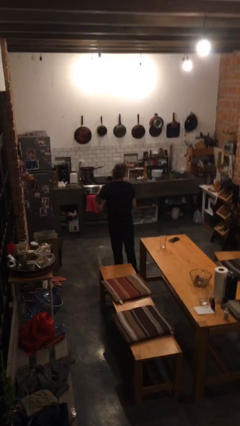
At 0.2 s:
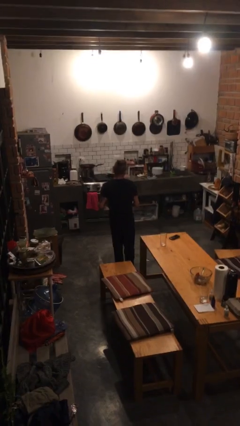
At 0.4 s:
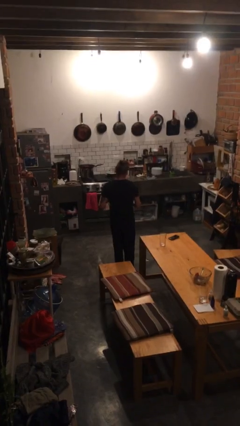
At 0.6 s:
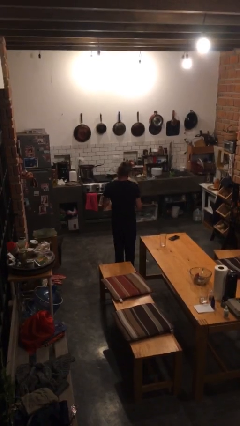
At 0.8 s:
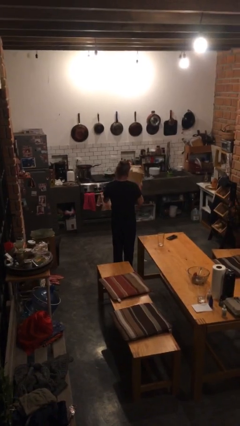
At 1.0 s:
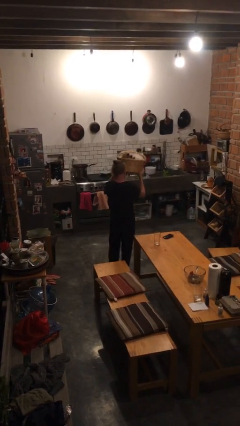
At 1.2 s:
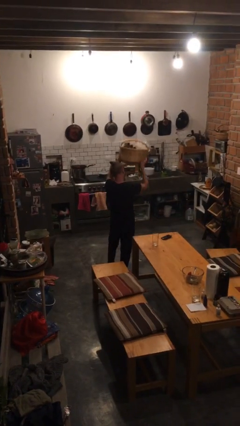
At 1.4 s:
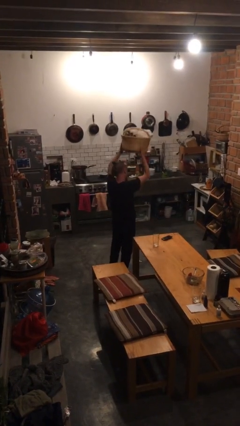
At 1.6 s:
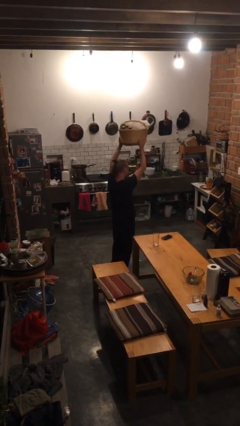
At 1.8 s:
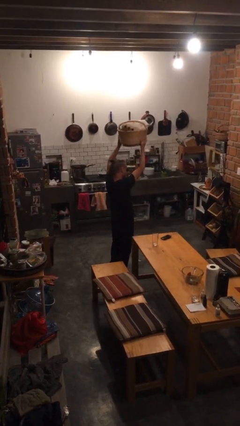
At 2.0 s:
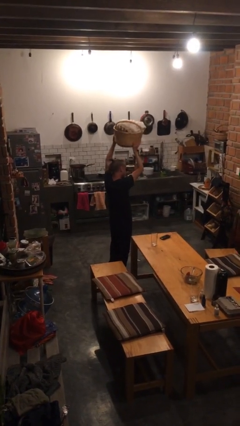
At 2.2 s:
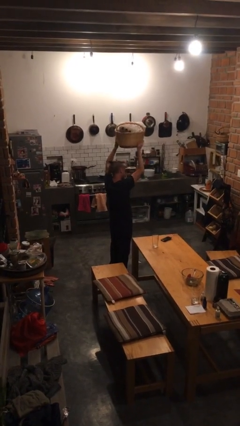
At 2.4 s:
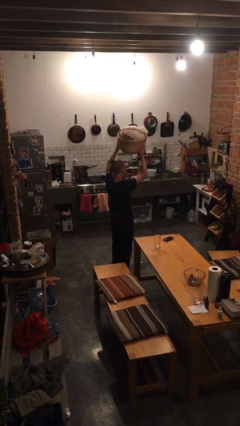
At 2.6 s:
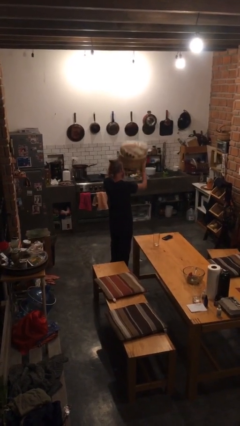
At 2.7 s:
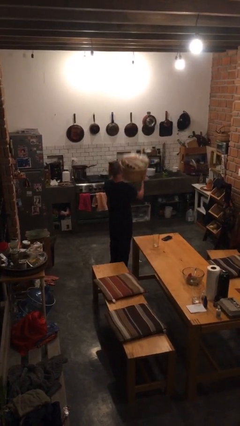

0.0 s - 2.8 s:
person holds object above head

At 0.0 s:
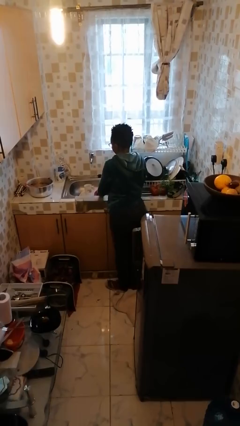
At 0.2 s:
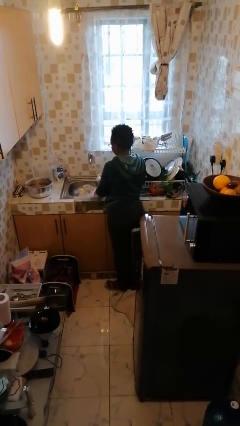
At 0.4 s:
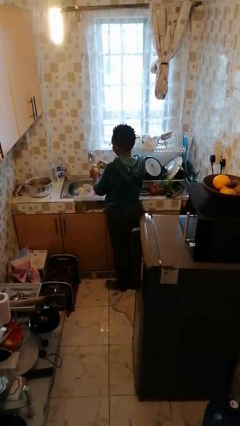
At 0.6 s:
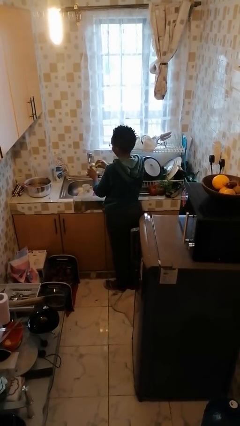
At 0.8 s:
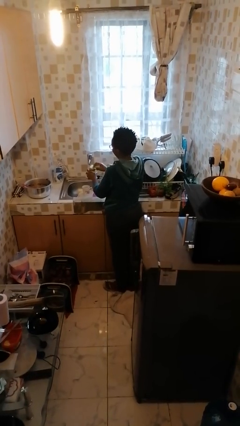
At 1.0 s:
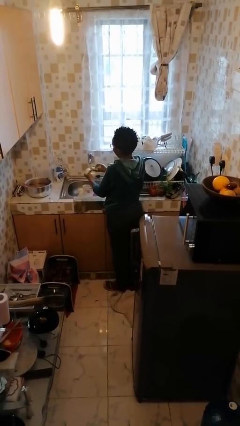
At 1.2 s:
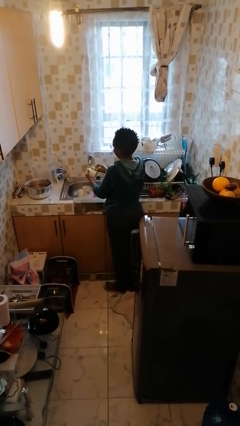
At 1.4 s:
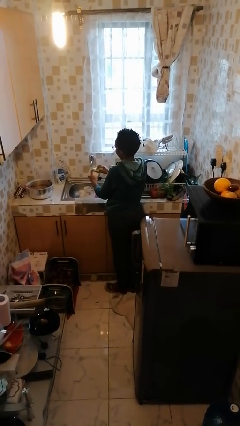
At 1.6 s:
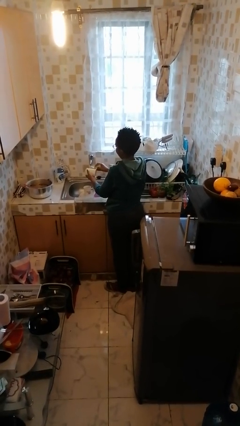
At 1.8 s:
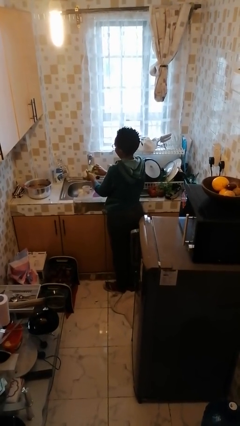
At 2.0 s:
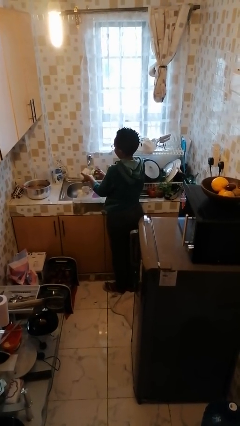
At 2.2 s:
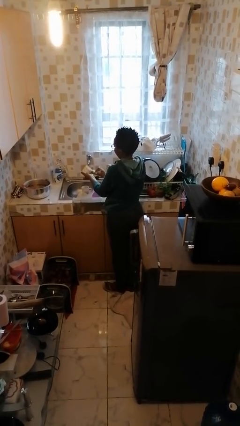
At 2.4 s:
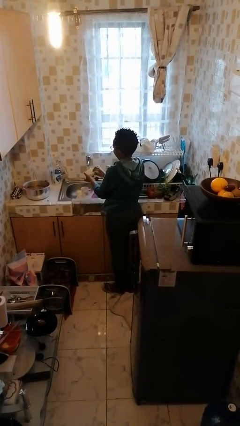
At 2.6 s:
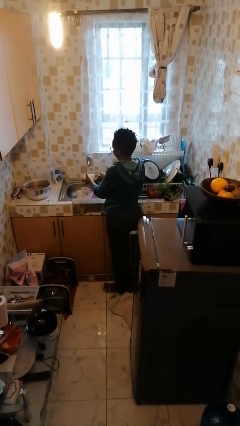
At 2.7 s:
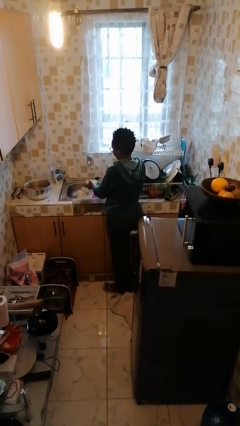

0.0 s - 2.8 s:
person washes dish

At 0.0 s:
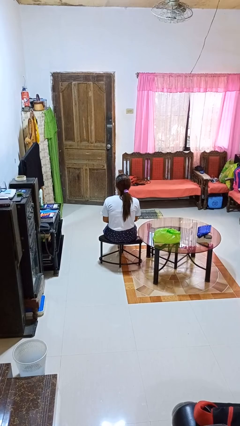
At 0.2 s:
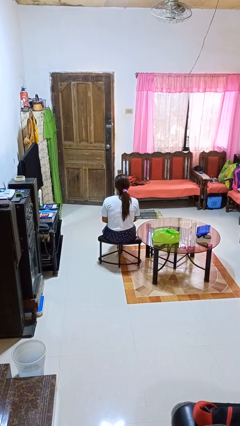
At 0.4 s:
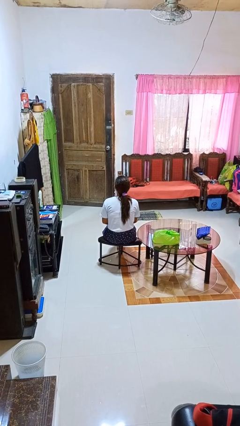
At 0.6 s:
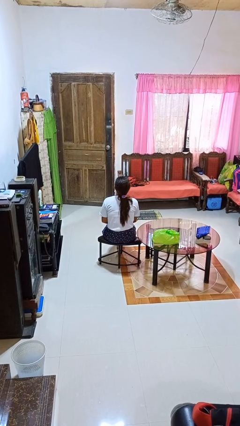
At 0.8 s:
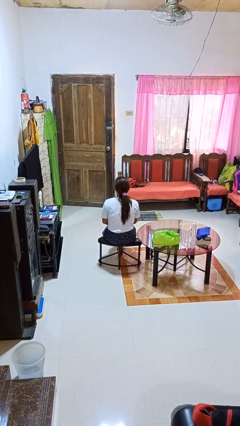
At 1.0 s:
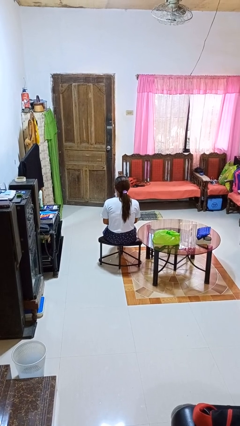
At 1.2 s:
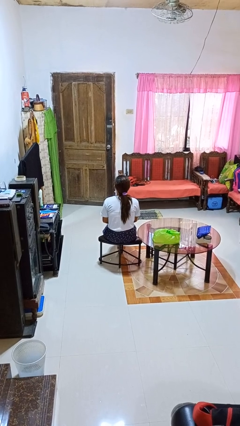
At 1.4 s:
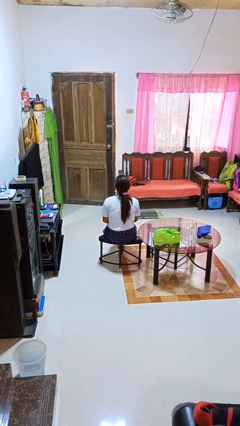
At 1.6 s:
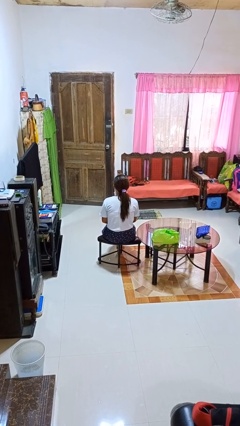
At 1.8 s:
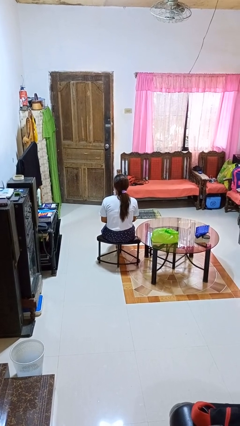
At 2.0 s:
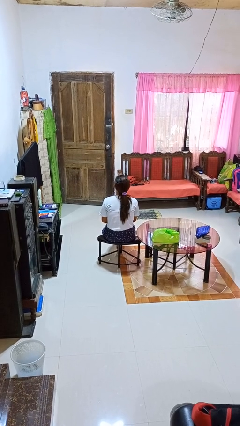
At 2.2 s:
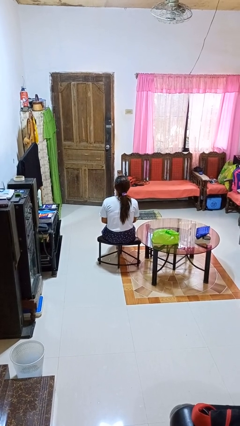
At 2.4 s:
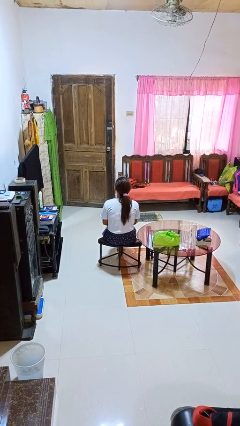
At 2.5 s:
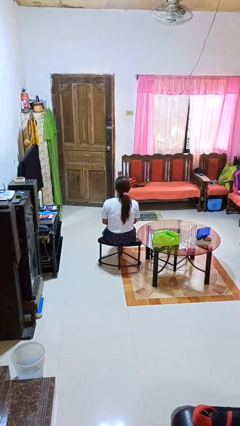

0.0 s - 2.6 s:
person nods head

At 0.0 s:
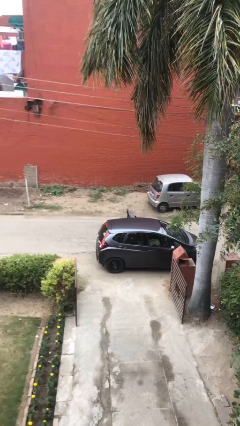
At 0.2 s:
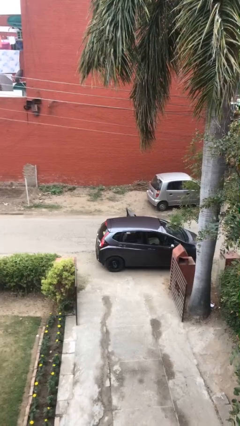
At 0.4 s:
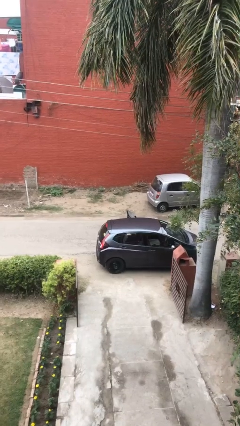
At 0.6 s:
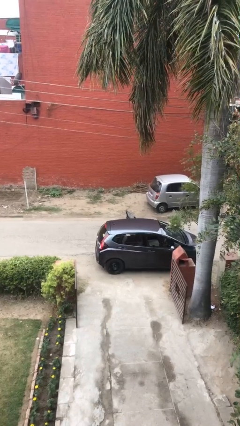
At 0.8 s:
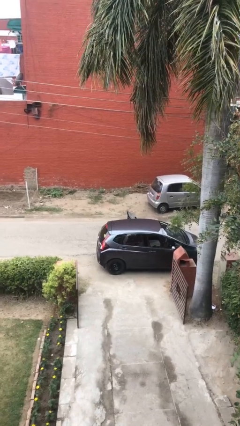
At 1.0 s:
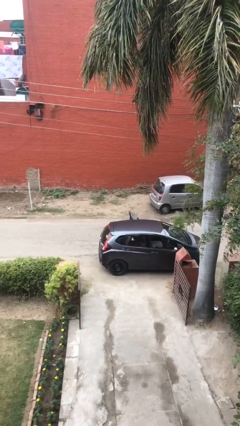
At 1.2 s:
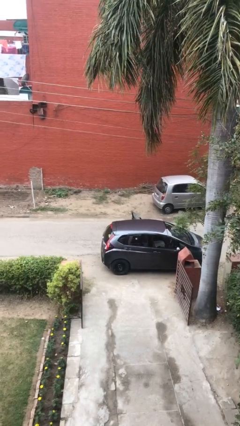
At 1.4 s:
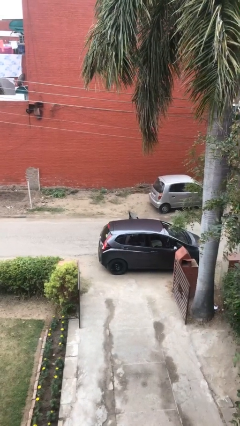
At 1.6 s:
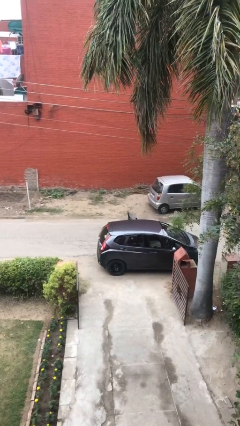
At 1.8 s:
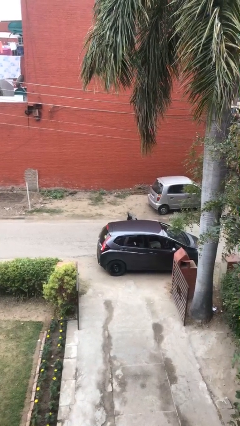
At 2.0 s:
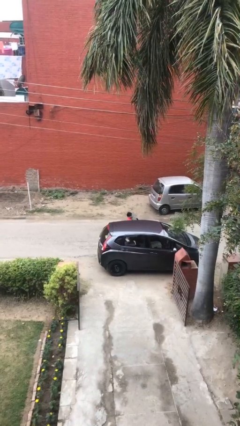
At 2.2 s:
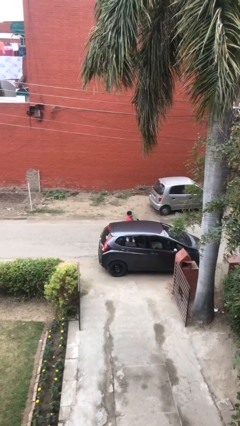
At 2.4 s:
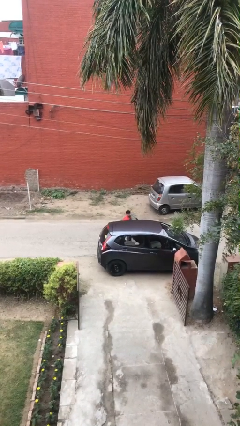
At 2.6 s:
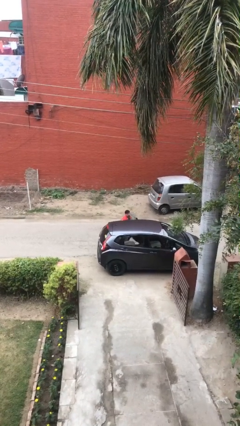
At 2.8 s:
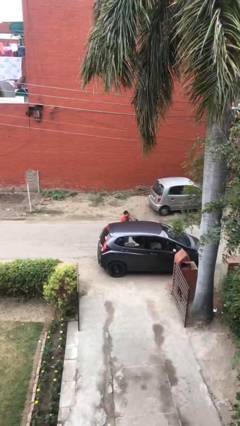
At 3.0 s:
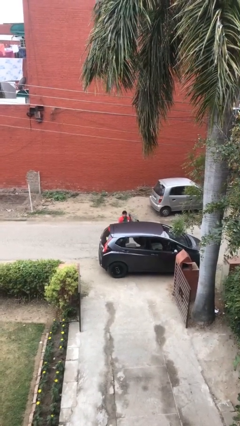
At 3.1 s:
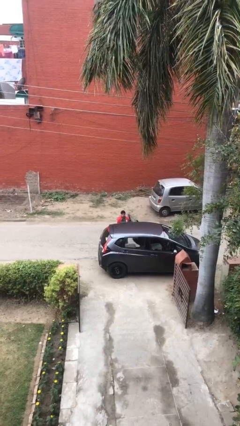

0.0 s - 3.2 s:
person exits car

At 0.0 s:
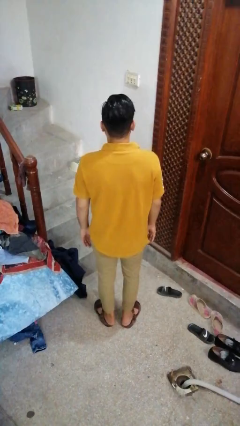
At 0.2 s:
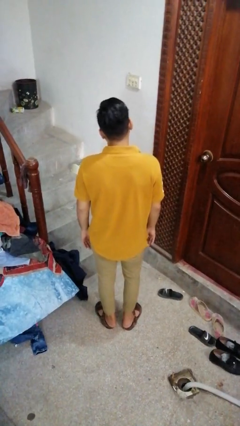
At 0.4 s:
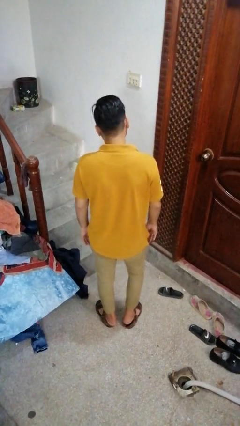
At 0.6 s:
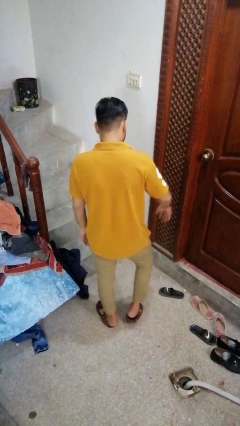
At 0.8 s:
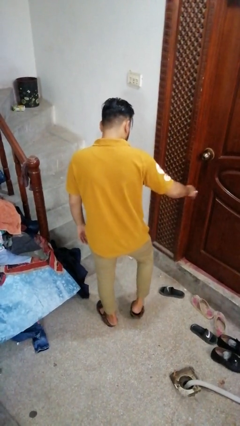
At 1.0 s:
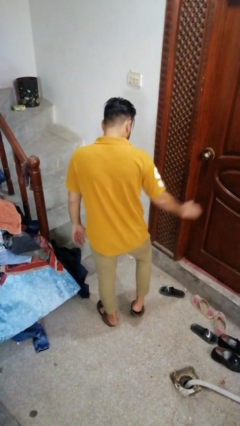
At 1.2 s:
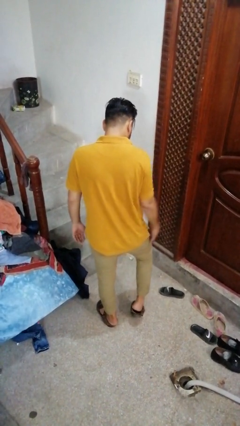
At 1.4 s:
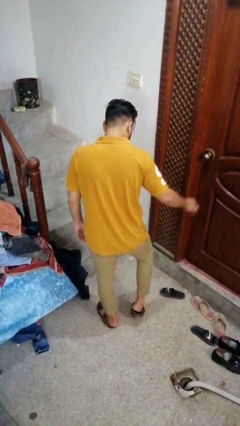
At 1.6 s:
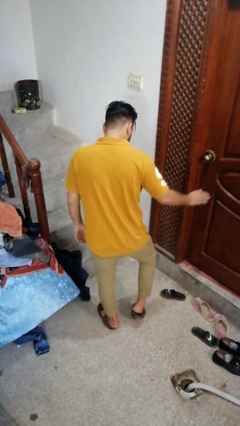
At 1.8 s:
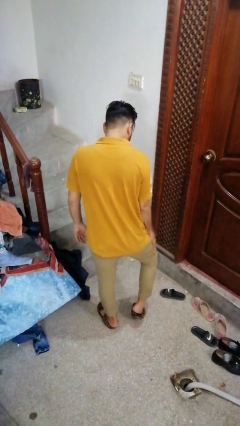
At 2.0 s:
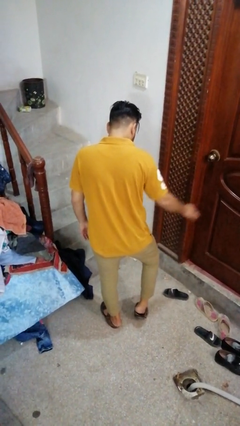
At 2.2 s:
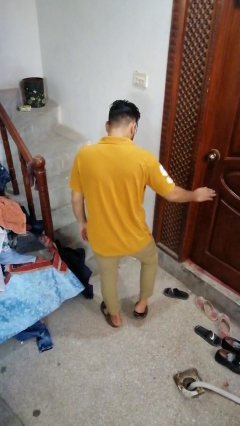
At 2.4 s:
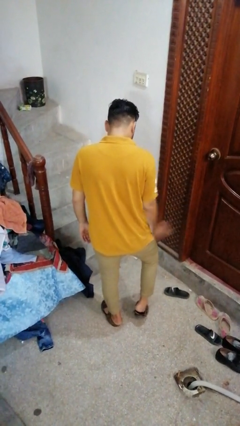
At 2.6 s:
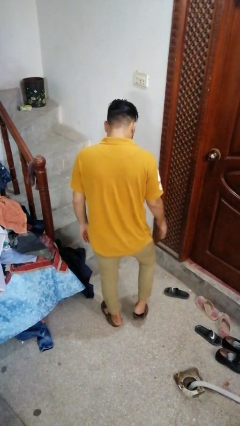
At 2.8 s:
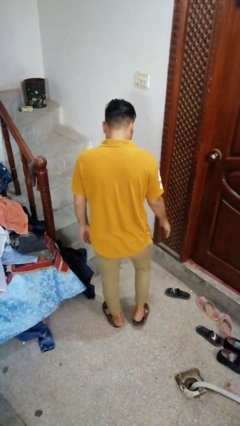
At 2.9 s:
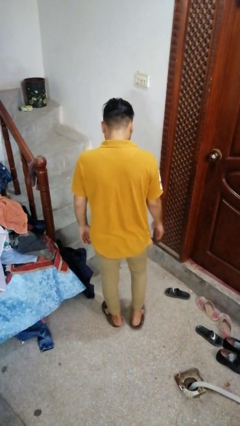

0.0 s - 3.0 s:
person slaps hands on thighs

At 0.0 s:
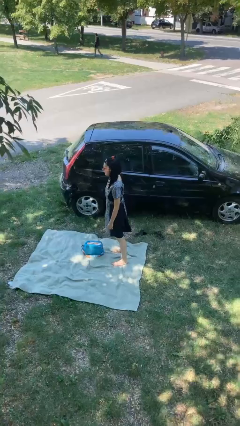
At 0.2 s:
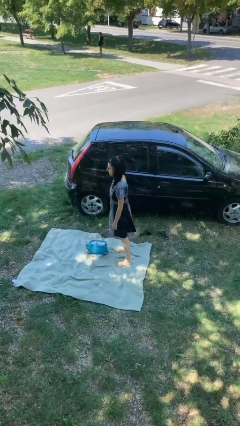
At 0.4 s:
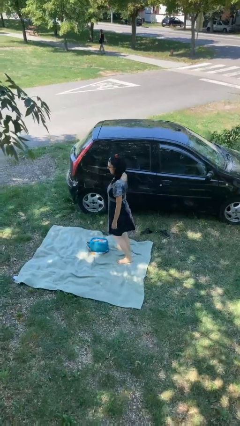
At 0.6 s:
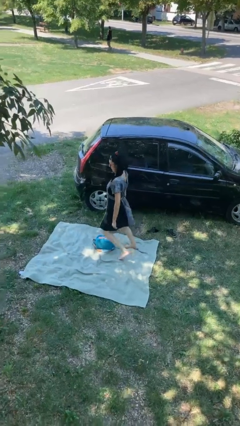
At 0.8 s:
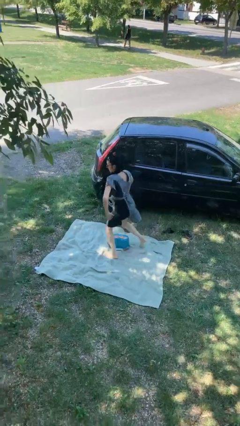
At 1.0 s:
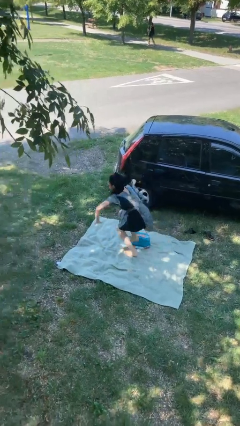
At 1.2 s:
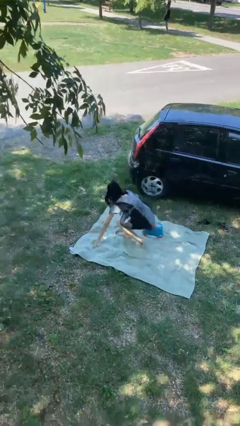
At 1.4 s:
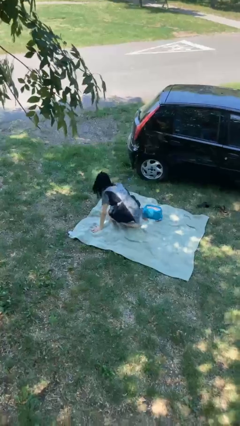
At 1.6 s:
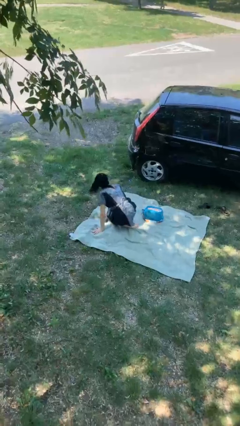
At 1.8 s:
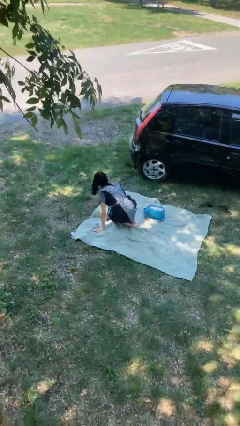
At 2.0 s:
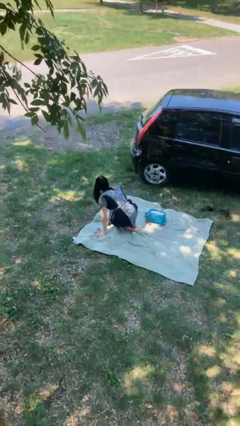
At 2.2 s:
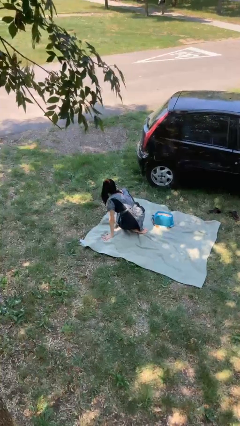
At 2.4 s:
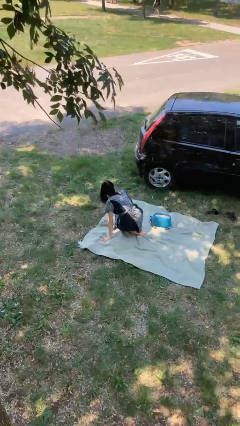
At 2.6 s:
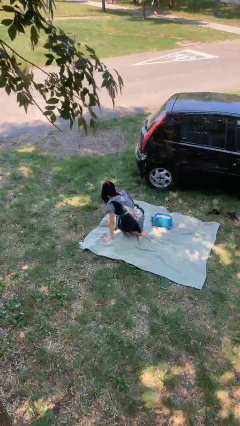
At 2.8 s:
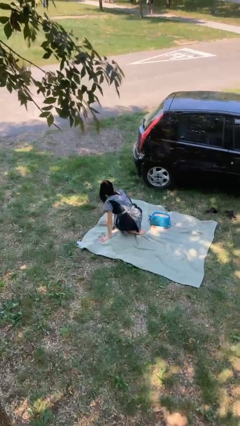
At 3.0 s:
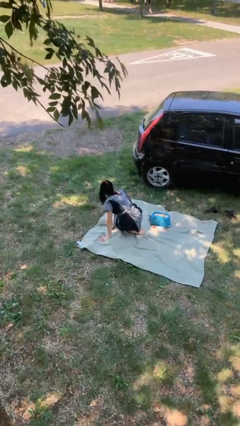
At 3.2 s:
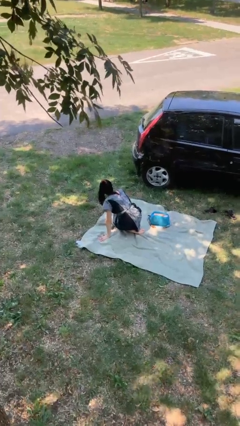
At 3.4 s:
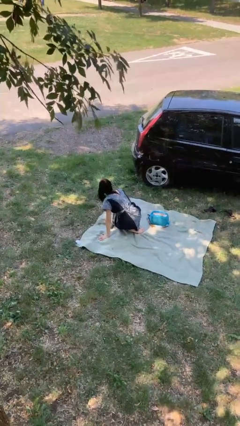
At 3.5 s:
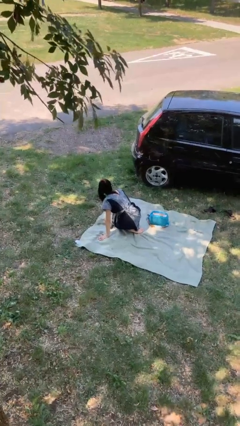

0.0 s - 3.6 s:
person trips on object on floor
